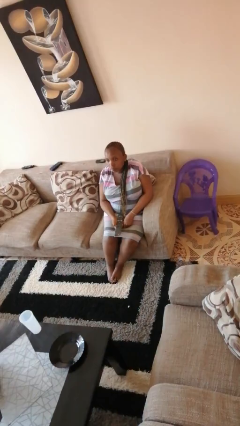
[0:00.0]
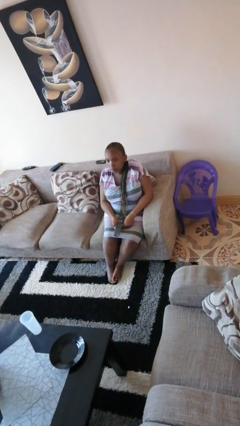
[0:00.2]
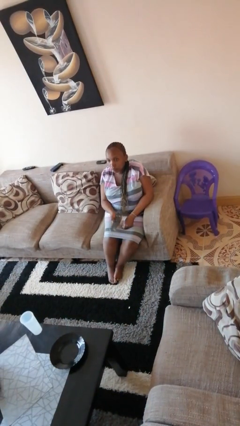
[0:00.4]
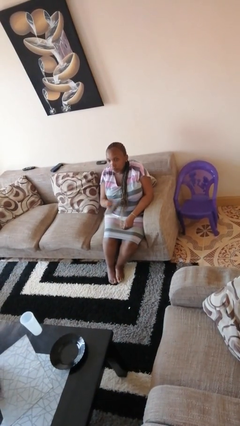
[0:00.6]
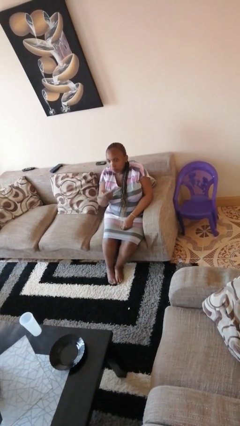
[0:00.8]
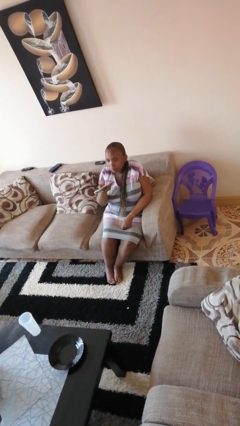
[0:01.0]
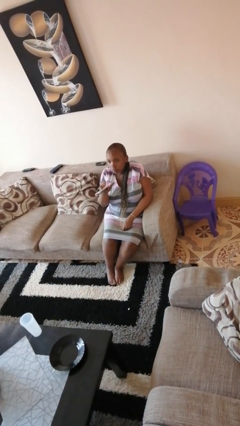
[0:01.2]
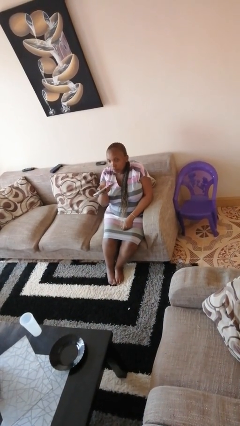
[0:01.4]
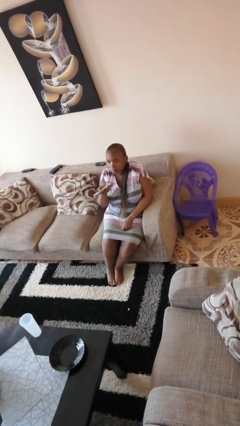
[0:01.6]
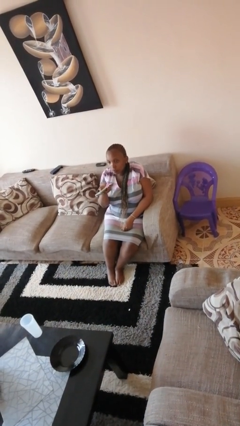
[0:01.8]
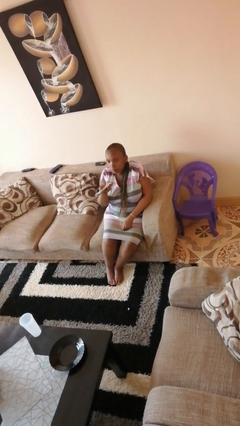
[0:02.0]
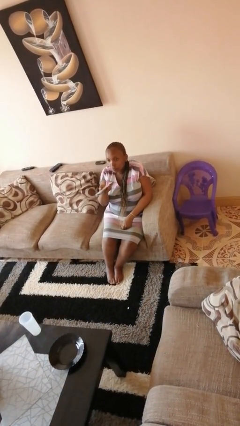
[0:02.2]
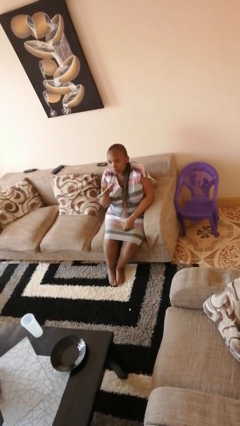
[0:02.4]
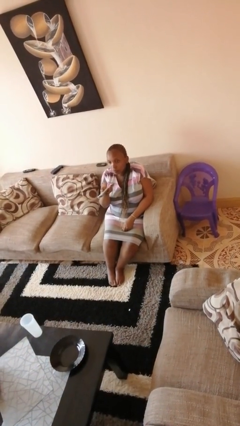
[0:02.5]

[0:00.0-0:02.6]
person uses television remote

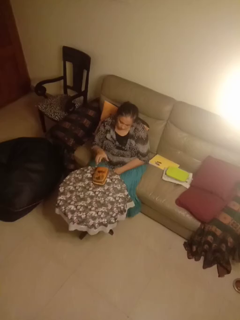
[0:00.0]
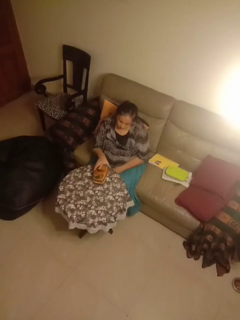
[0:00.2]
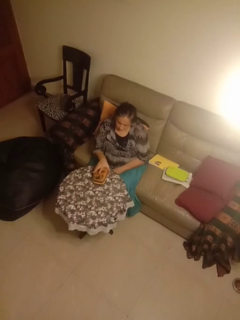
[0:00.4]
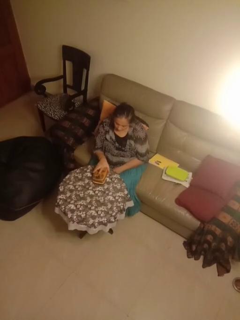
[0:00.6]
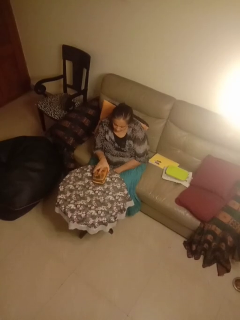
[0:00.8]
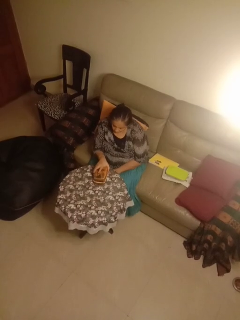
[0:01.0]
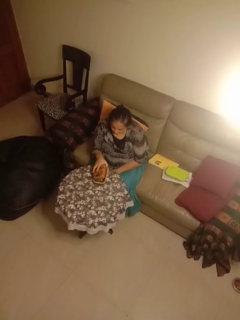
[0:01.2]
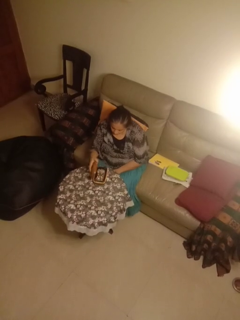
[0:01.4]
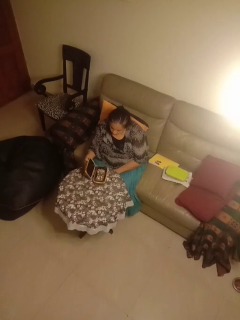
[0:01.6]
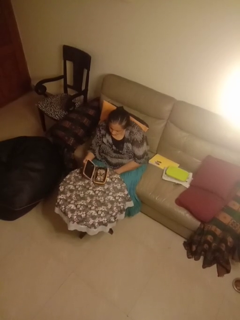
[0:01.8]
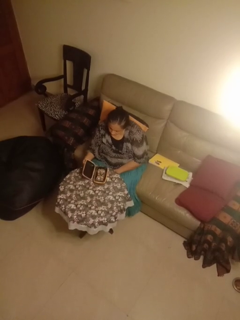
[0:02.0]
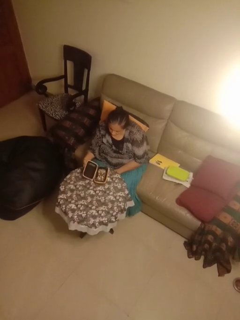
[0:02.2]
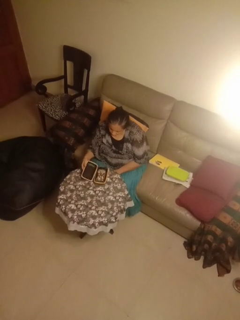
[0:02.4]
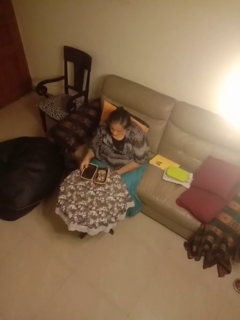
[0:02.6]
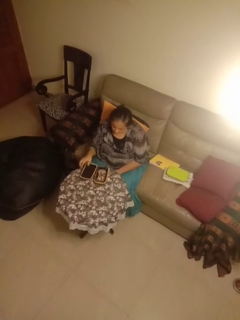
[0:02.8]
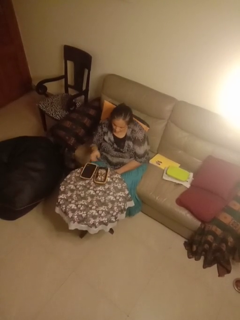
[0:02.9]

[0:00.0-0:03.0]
person opens jewelry box

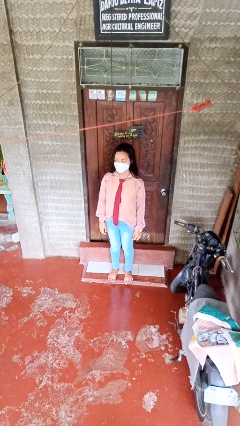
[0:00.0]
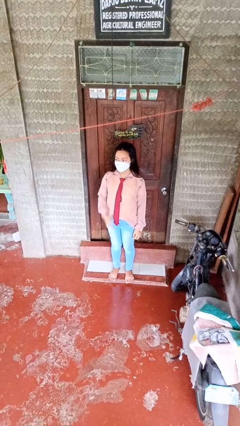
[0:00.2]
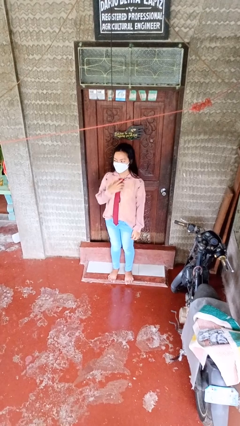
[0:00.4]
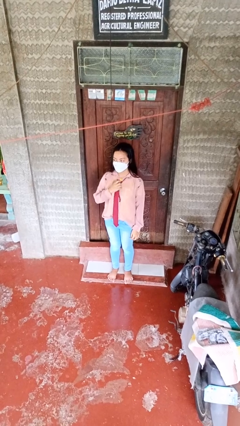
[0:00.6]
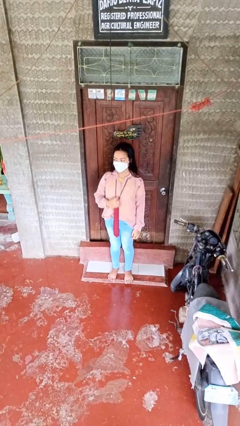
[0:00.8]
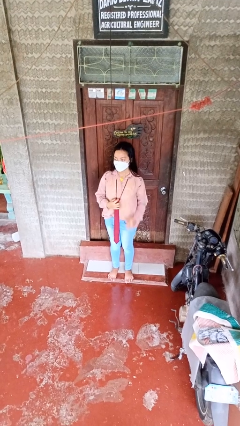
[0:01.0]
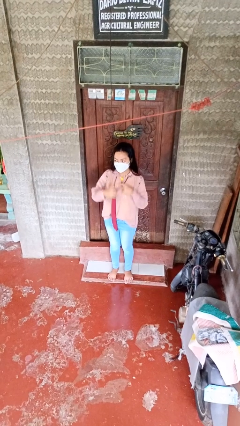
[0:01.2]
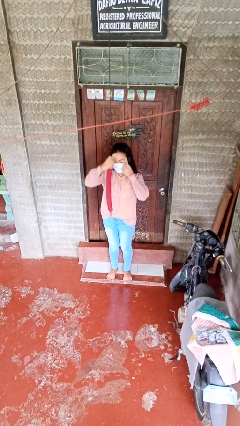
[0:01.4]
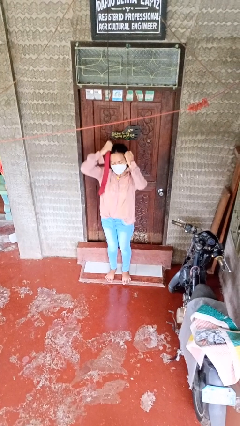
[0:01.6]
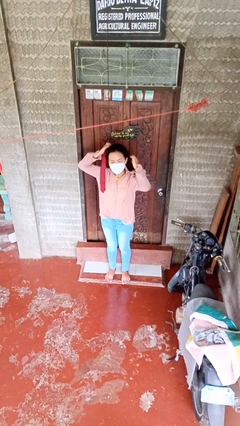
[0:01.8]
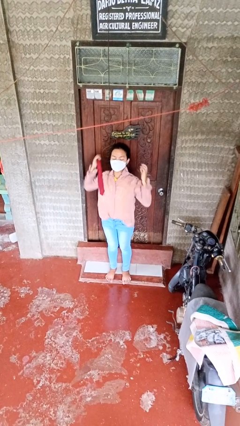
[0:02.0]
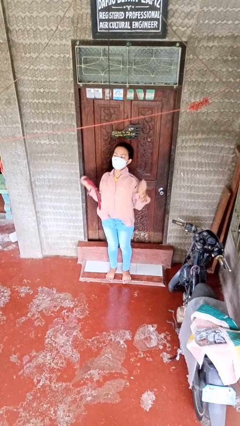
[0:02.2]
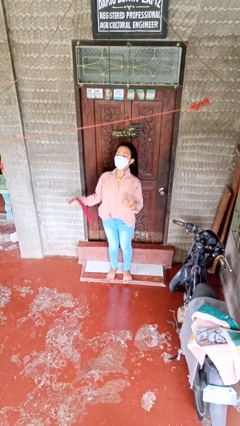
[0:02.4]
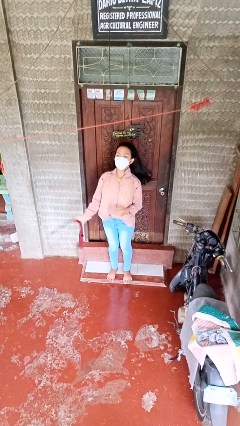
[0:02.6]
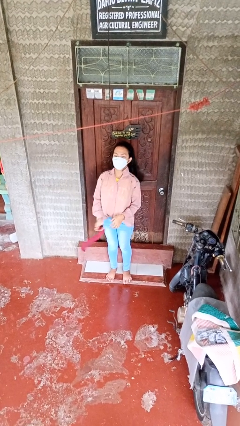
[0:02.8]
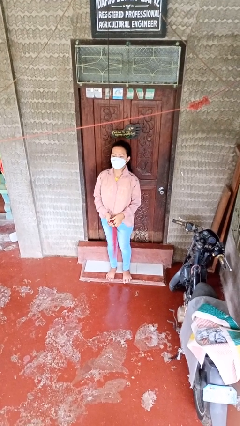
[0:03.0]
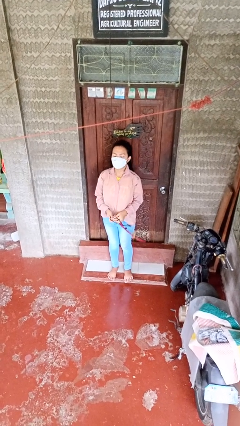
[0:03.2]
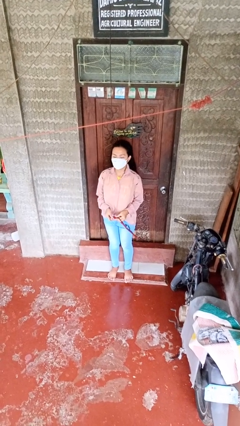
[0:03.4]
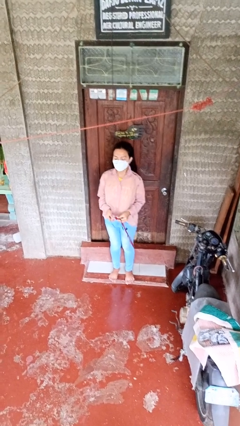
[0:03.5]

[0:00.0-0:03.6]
person takes off necktie

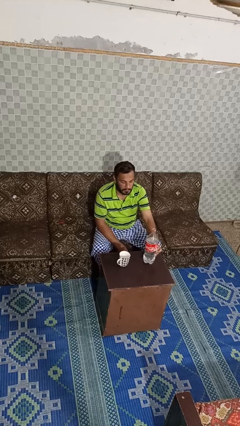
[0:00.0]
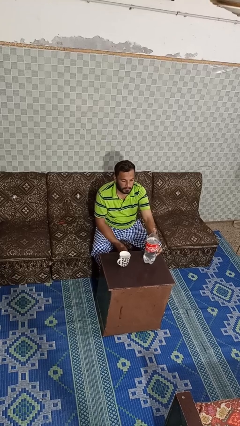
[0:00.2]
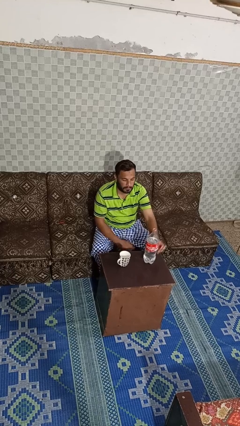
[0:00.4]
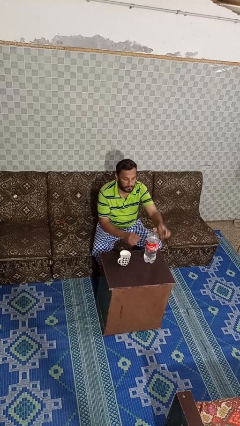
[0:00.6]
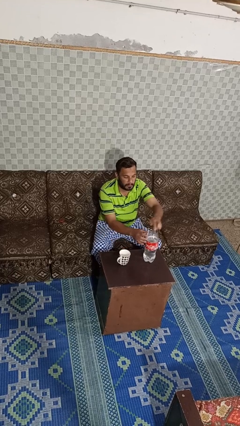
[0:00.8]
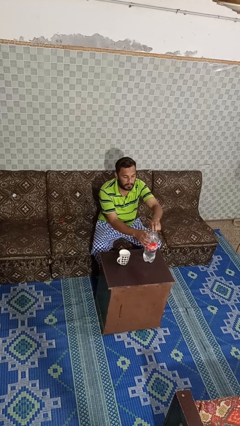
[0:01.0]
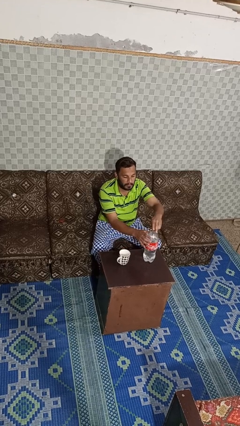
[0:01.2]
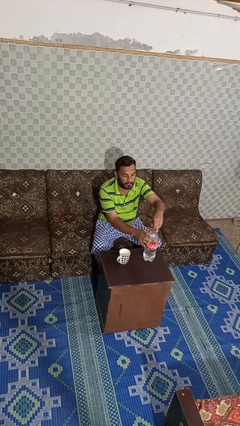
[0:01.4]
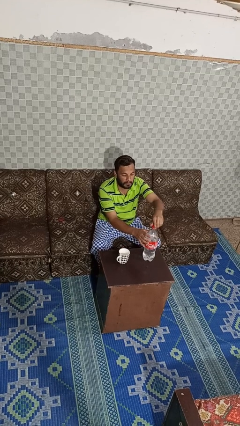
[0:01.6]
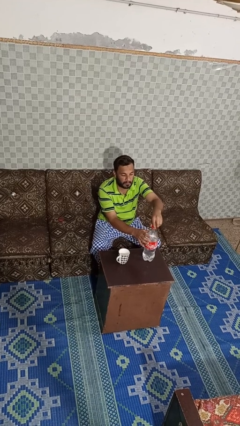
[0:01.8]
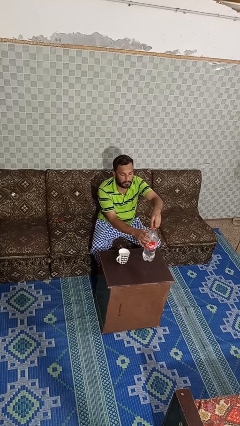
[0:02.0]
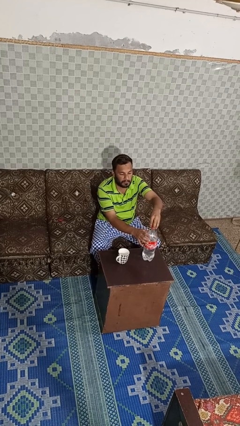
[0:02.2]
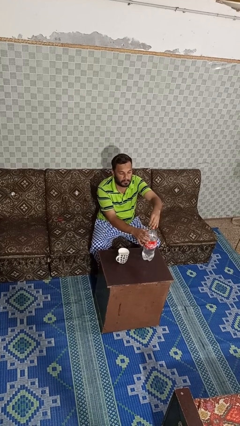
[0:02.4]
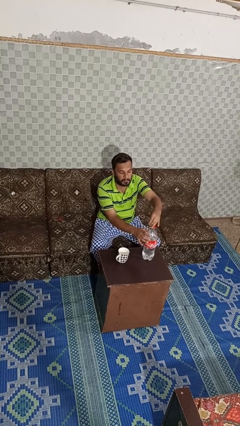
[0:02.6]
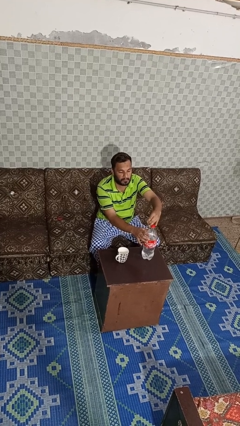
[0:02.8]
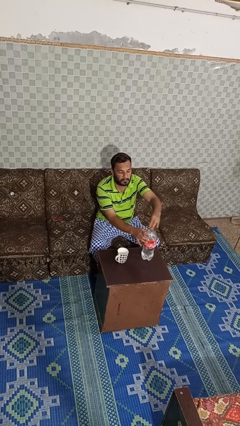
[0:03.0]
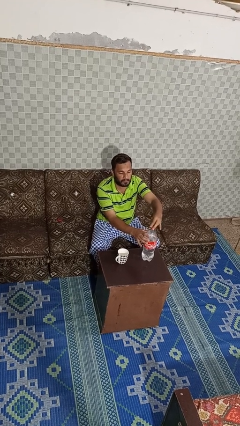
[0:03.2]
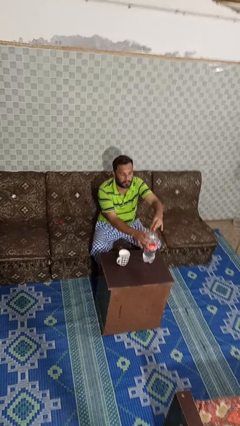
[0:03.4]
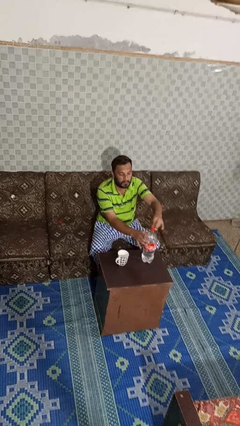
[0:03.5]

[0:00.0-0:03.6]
person screws lid to bottle

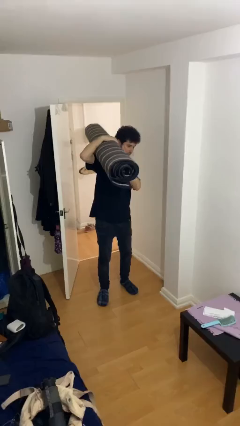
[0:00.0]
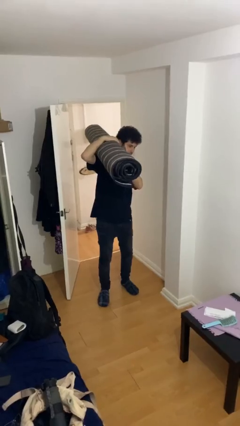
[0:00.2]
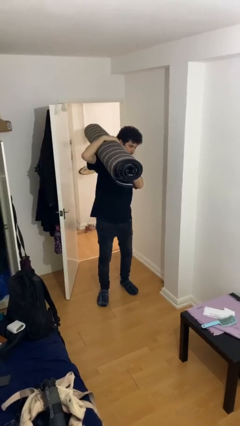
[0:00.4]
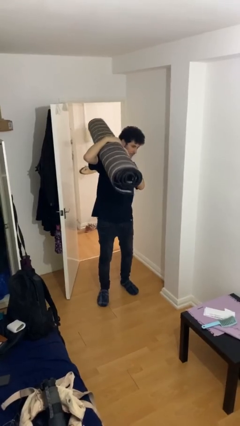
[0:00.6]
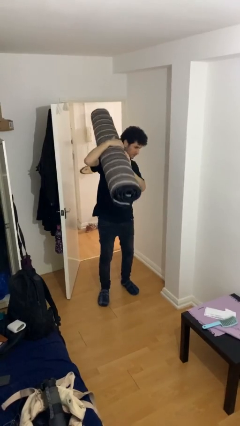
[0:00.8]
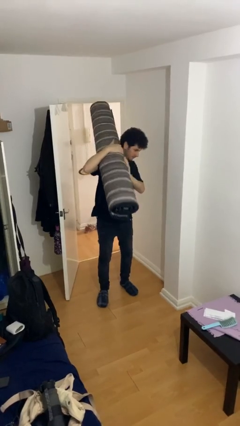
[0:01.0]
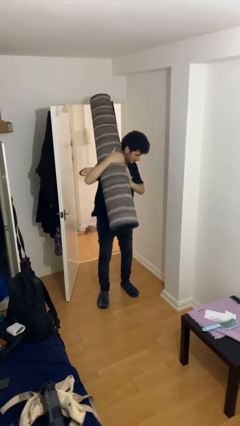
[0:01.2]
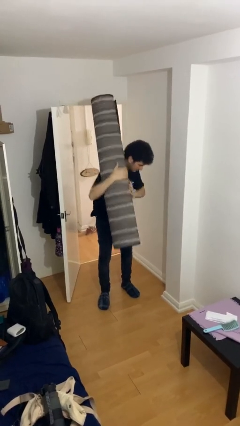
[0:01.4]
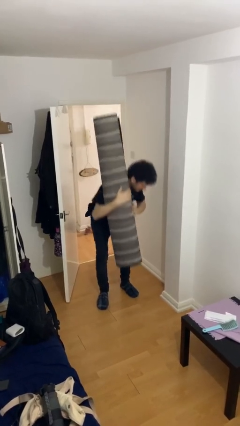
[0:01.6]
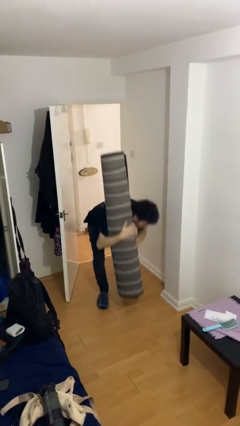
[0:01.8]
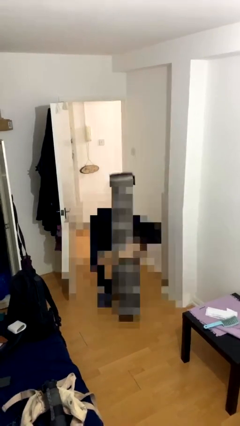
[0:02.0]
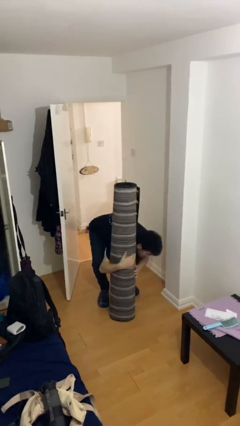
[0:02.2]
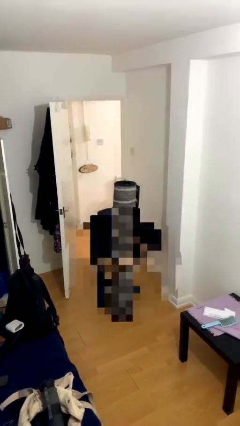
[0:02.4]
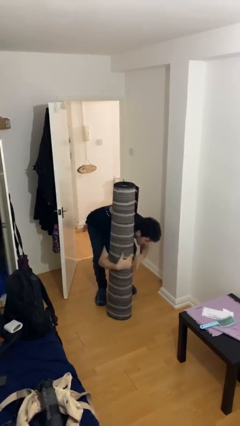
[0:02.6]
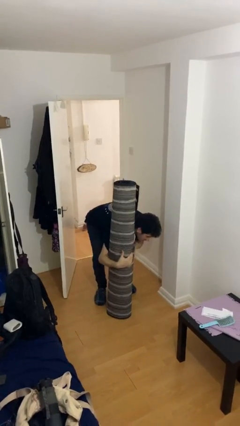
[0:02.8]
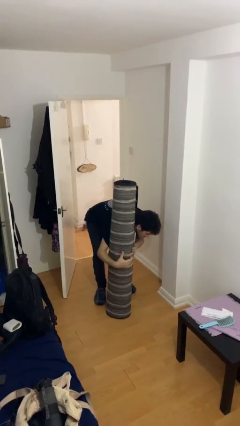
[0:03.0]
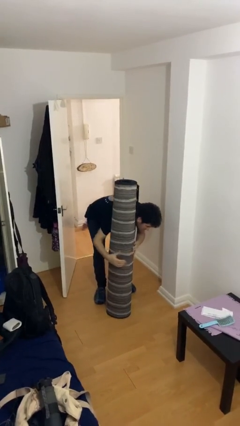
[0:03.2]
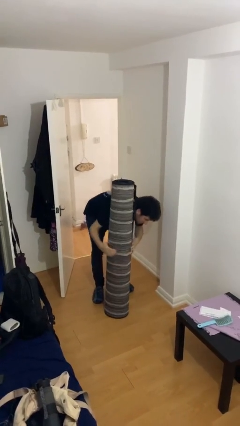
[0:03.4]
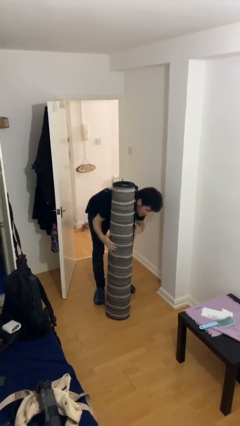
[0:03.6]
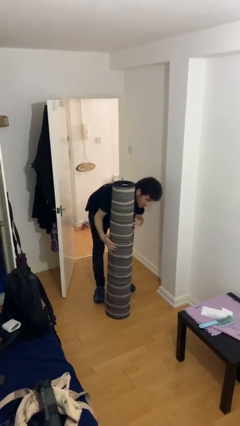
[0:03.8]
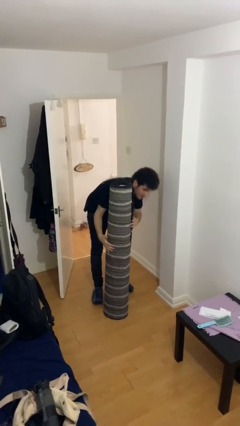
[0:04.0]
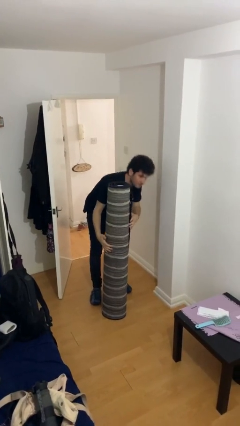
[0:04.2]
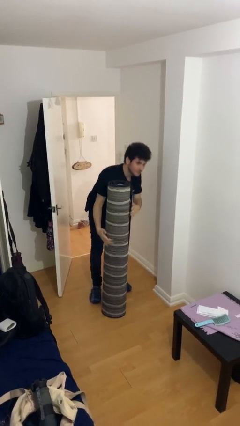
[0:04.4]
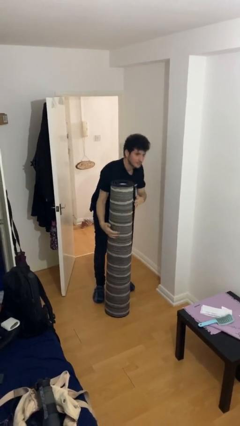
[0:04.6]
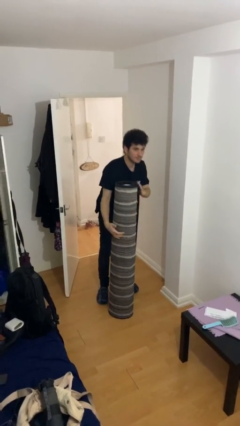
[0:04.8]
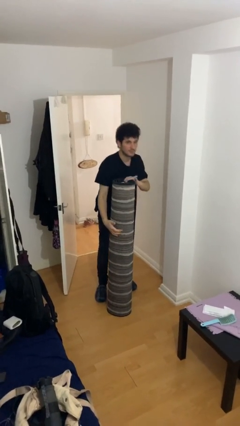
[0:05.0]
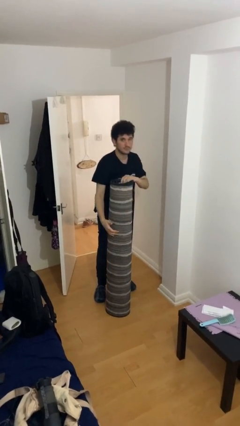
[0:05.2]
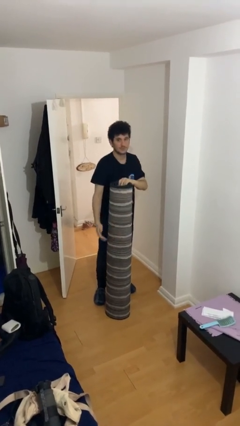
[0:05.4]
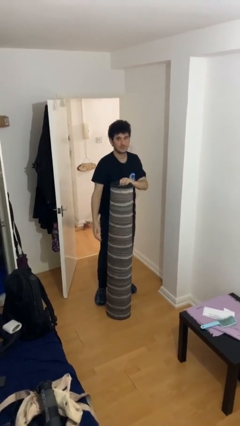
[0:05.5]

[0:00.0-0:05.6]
person puts down object on floor
